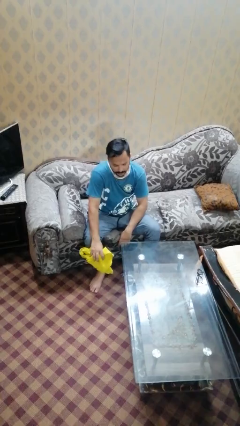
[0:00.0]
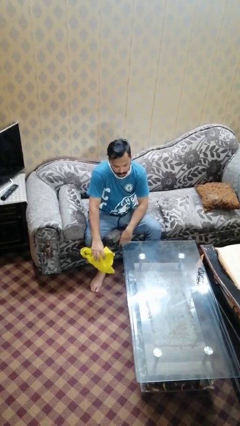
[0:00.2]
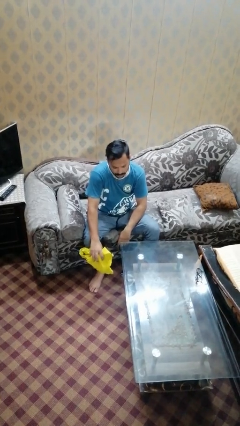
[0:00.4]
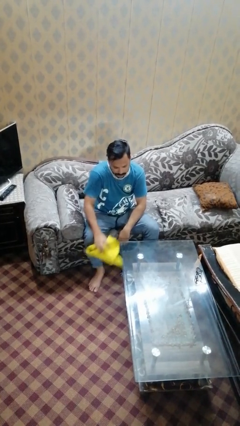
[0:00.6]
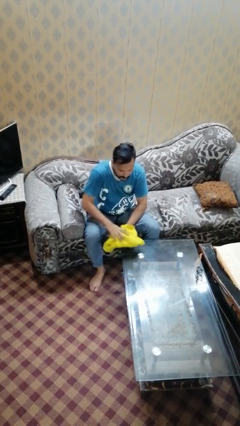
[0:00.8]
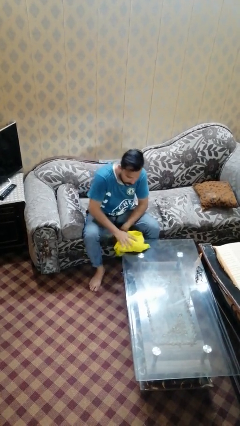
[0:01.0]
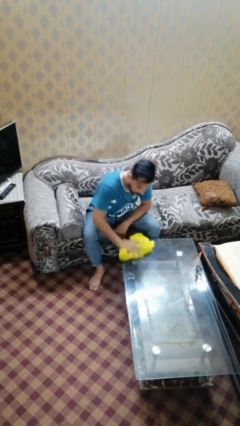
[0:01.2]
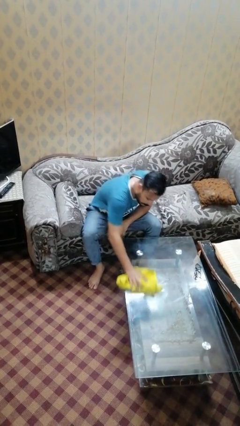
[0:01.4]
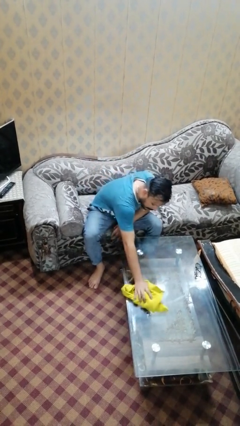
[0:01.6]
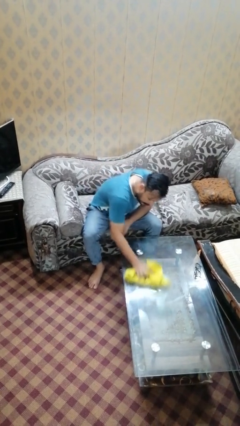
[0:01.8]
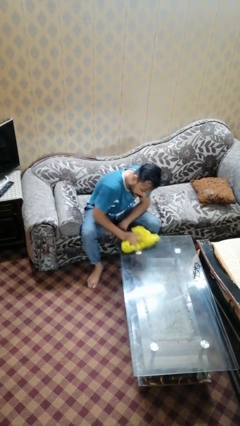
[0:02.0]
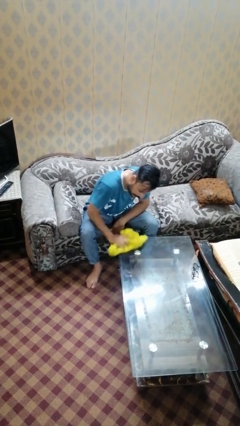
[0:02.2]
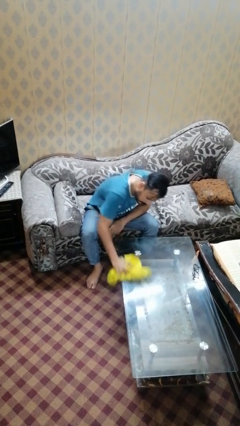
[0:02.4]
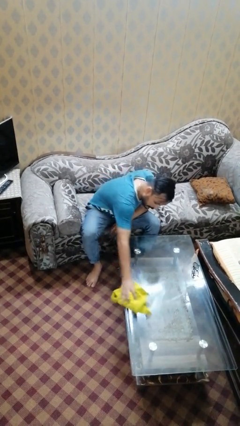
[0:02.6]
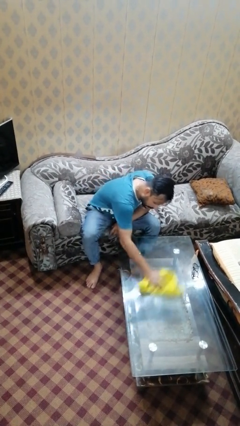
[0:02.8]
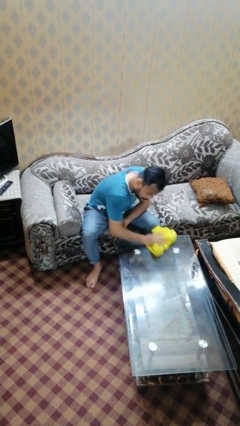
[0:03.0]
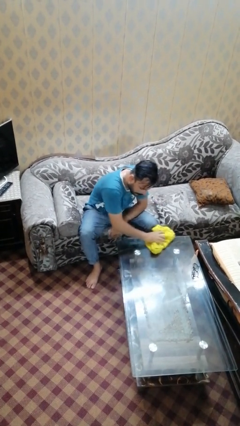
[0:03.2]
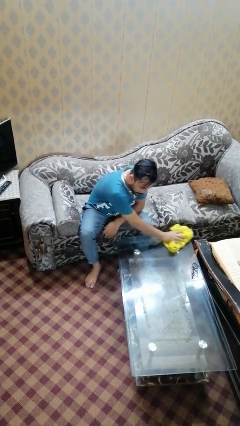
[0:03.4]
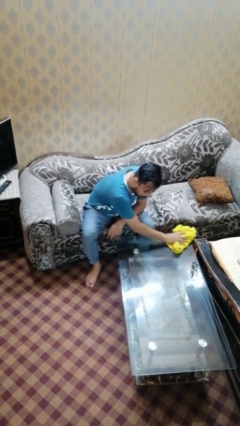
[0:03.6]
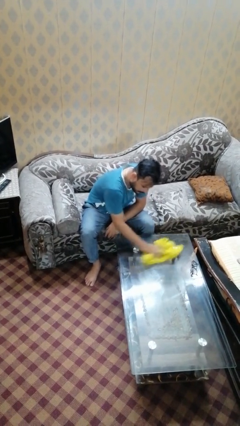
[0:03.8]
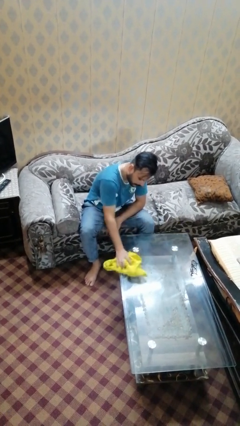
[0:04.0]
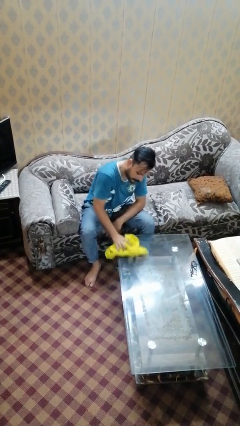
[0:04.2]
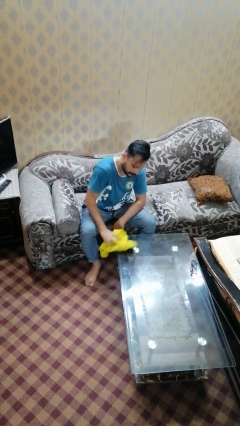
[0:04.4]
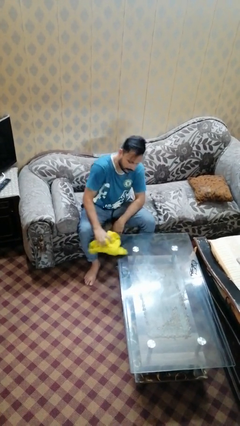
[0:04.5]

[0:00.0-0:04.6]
person cleans table with rag

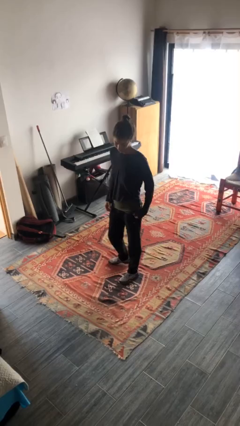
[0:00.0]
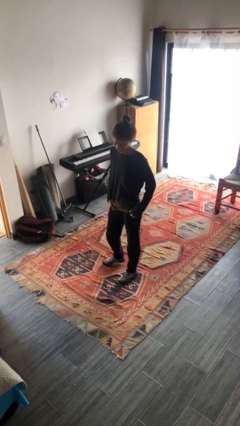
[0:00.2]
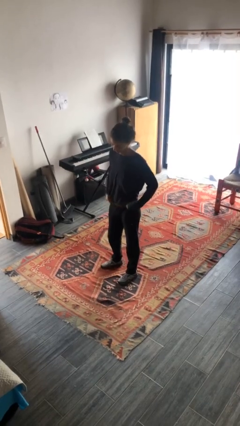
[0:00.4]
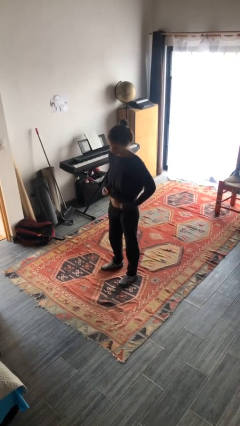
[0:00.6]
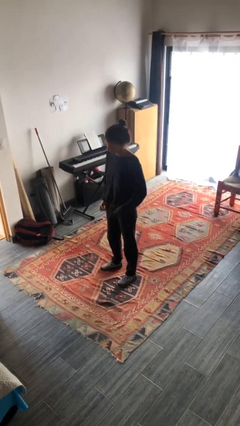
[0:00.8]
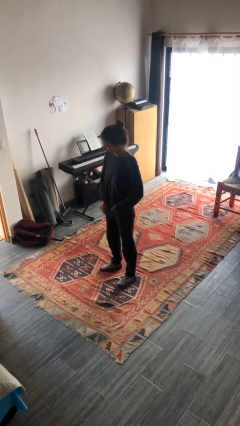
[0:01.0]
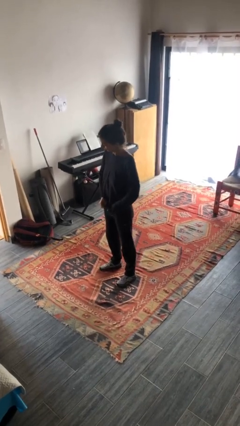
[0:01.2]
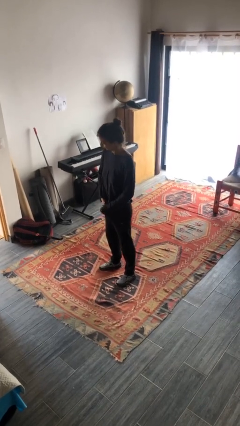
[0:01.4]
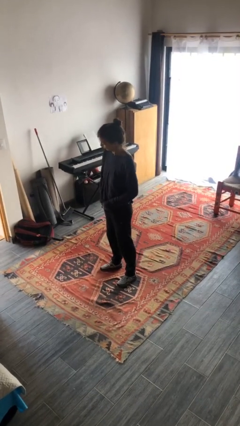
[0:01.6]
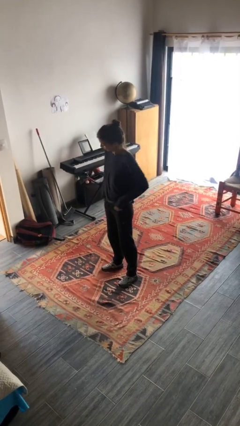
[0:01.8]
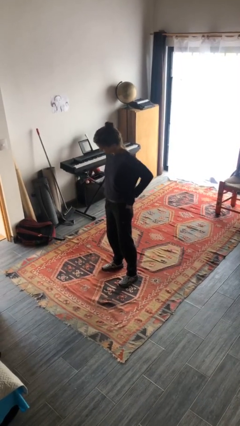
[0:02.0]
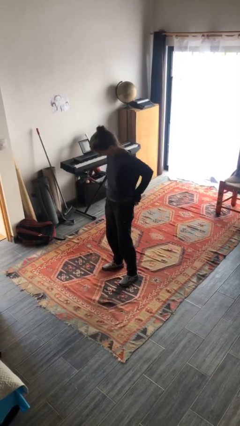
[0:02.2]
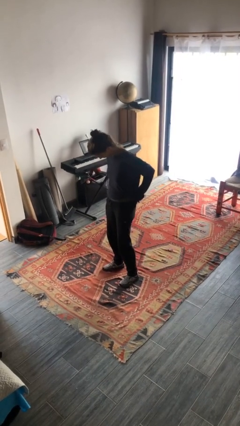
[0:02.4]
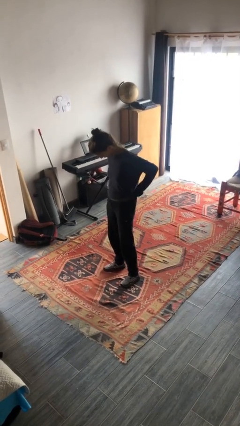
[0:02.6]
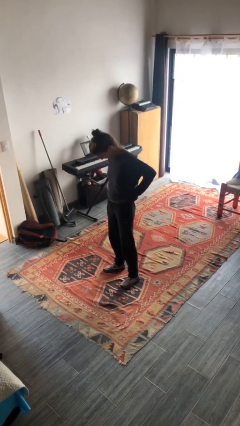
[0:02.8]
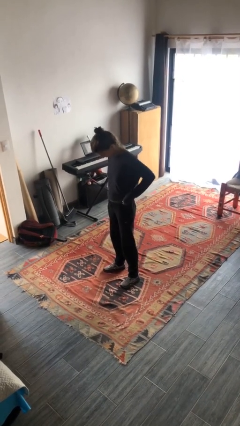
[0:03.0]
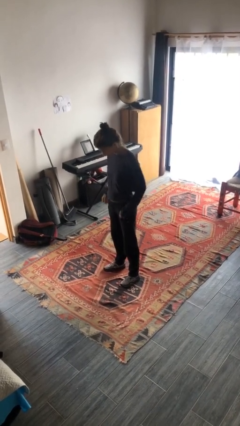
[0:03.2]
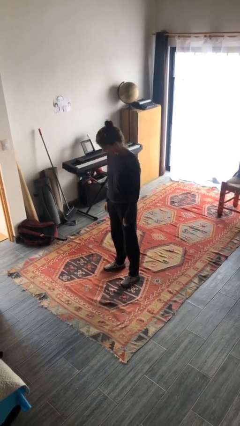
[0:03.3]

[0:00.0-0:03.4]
person tucks in shirt

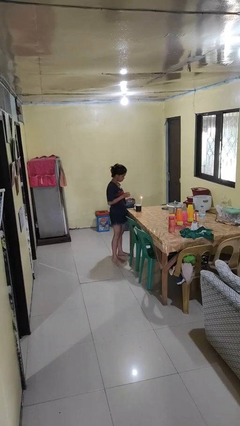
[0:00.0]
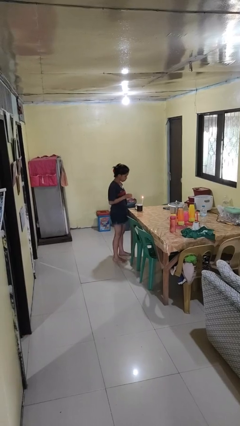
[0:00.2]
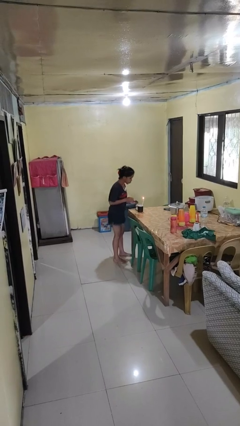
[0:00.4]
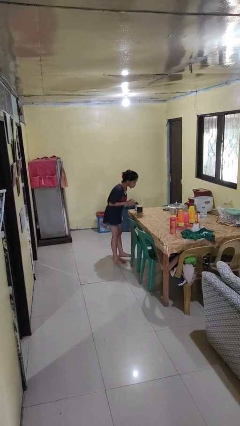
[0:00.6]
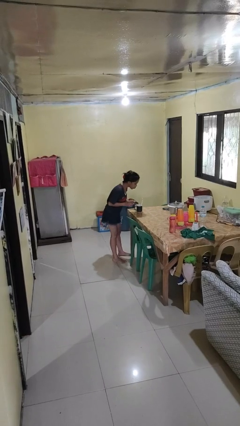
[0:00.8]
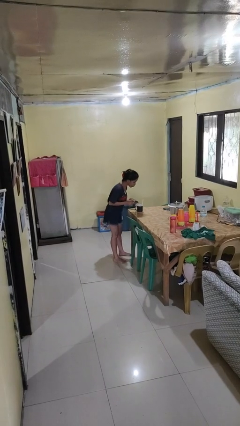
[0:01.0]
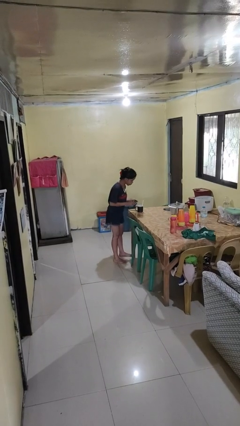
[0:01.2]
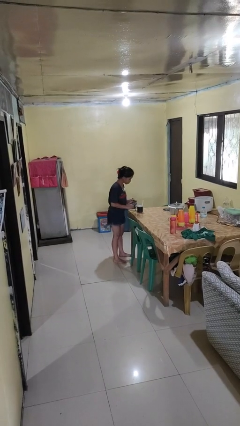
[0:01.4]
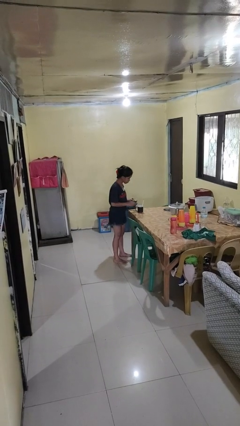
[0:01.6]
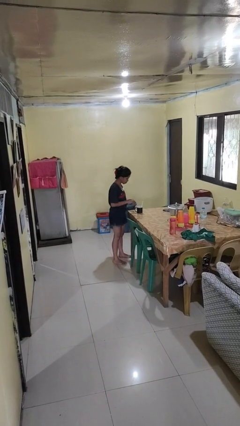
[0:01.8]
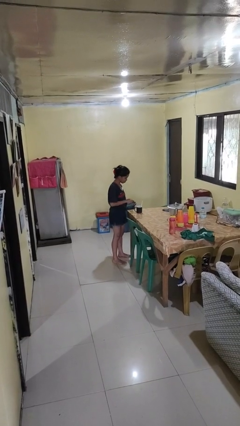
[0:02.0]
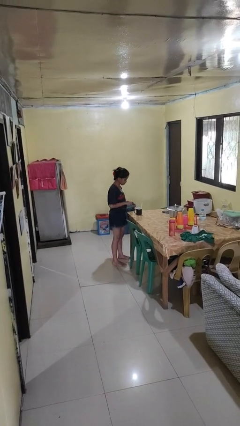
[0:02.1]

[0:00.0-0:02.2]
person extinguishes candle

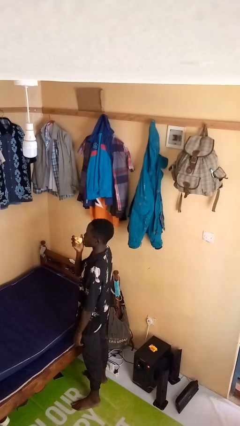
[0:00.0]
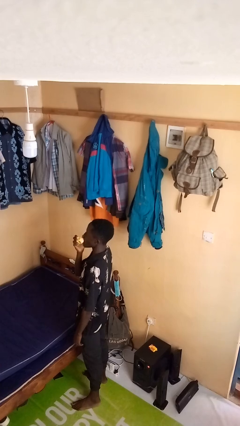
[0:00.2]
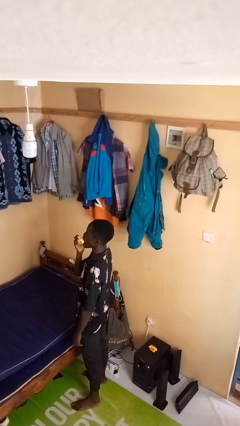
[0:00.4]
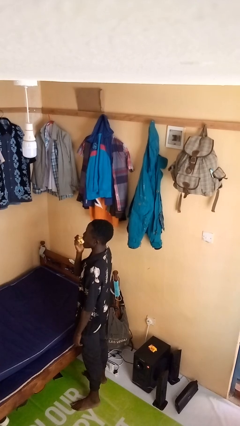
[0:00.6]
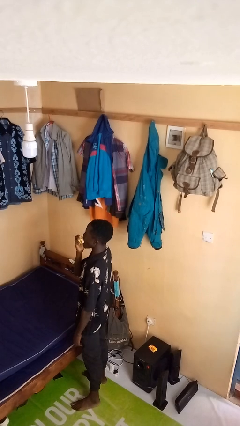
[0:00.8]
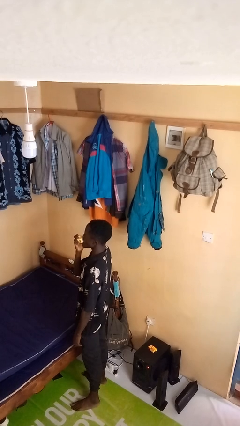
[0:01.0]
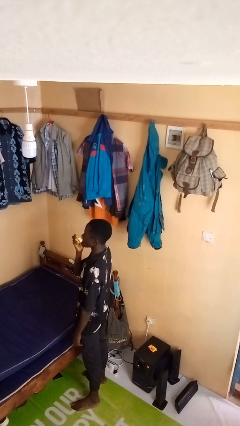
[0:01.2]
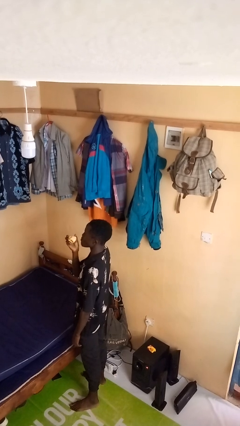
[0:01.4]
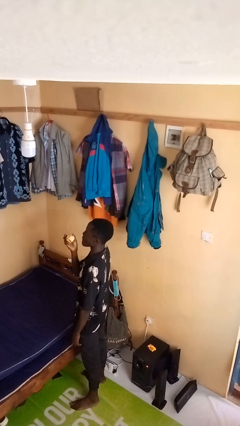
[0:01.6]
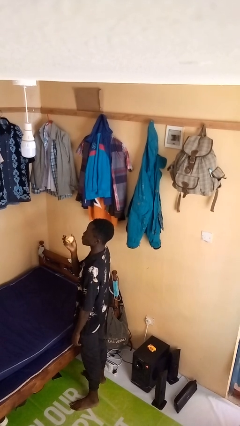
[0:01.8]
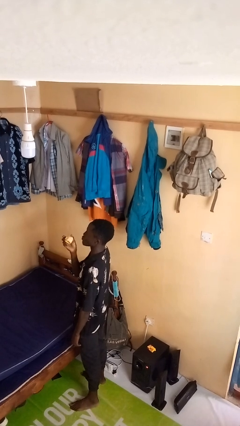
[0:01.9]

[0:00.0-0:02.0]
person eats apple

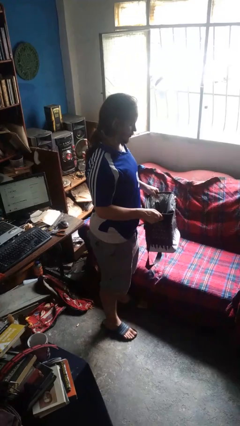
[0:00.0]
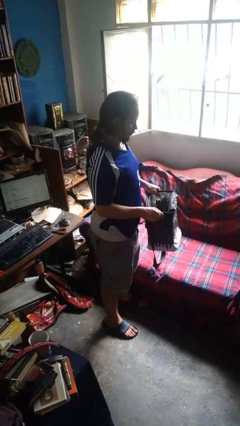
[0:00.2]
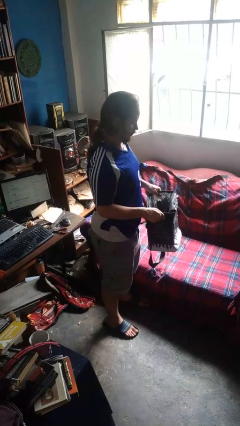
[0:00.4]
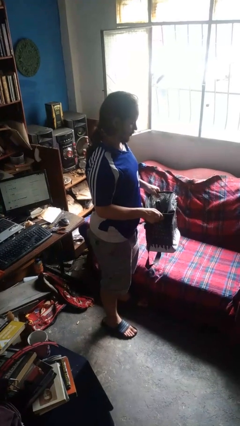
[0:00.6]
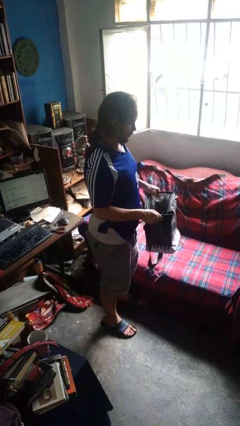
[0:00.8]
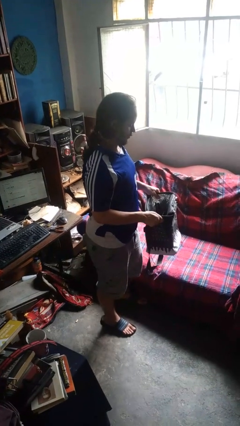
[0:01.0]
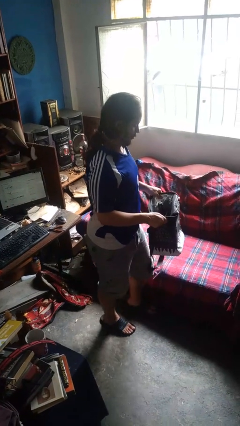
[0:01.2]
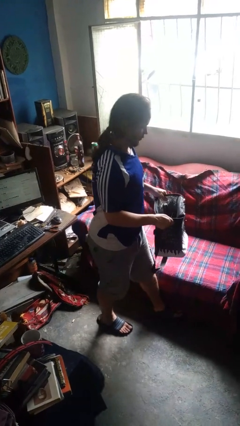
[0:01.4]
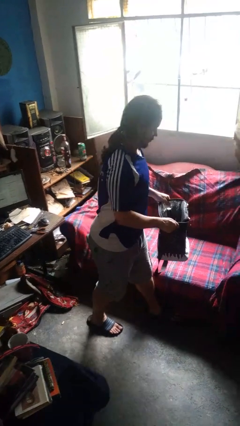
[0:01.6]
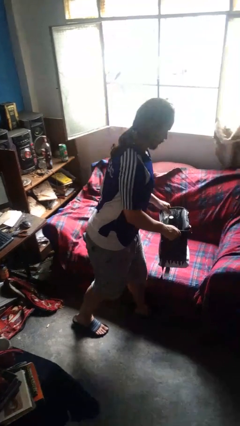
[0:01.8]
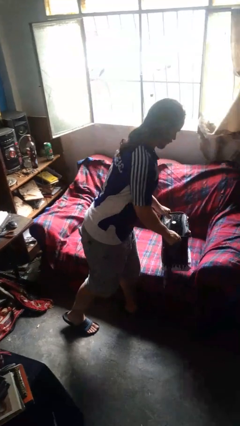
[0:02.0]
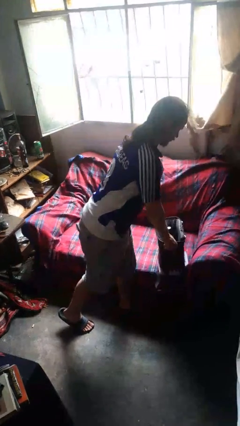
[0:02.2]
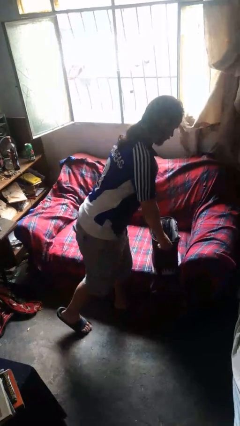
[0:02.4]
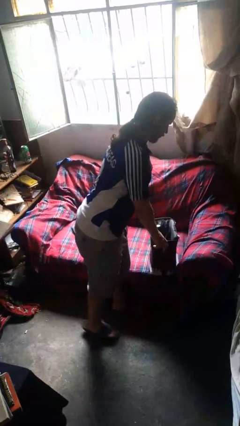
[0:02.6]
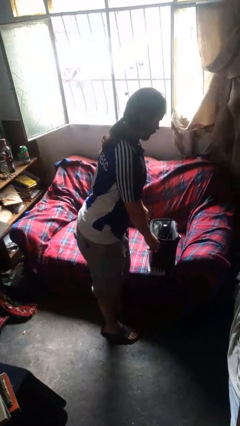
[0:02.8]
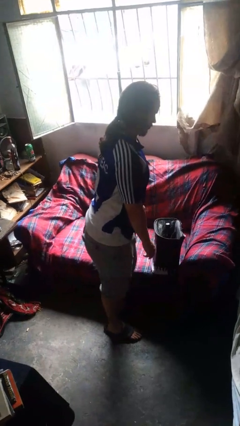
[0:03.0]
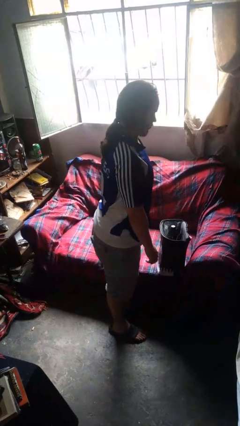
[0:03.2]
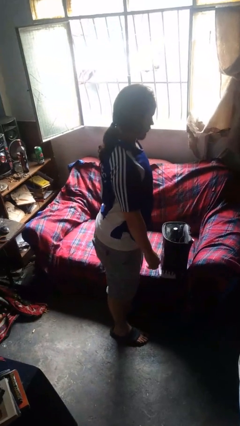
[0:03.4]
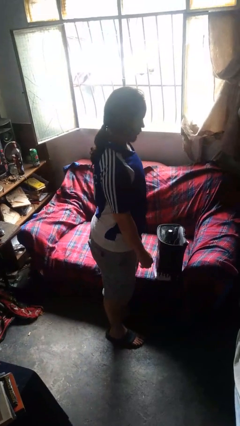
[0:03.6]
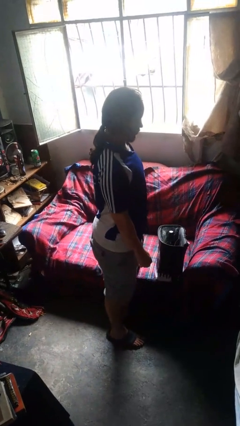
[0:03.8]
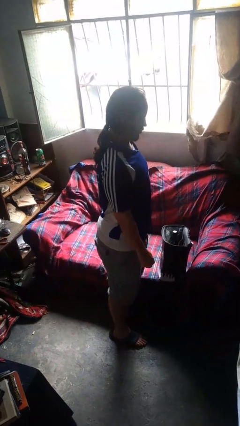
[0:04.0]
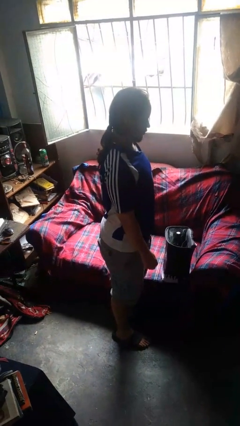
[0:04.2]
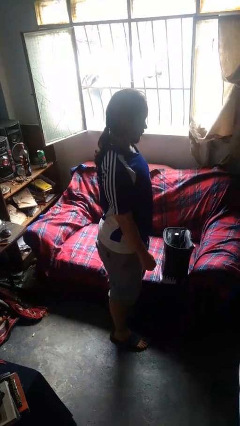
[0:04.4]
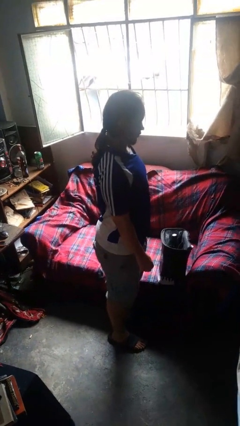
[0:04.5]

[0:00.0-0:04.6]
person puts down object on couch

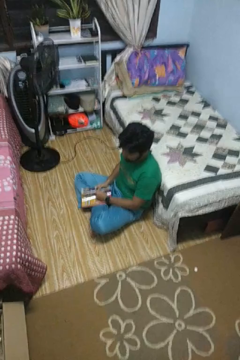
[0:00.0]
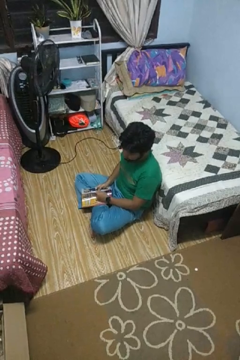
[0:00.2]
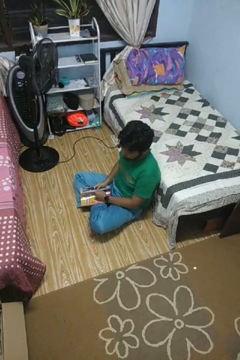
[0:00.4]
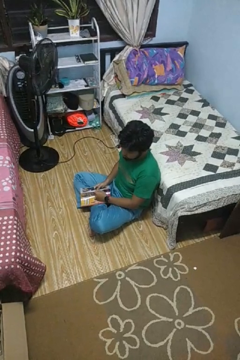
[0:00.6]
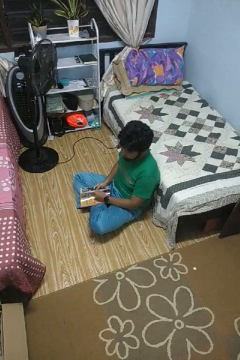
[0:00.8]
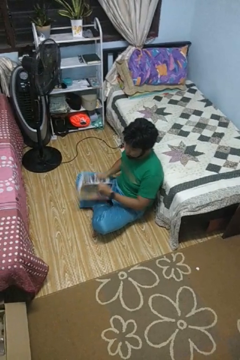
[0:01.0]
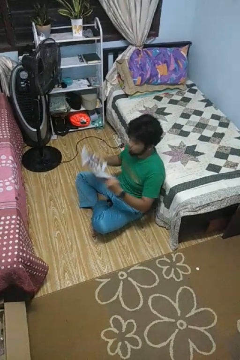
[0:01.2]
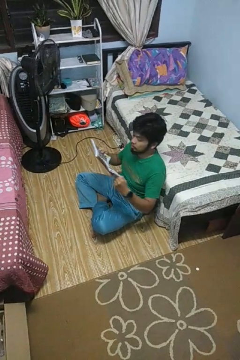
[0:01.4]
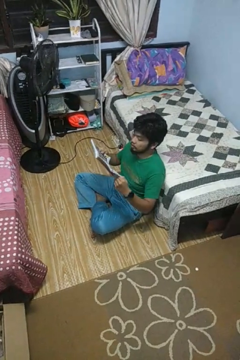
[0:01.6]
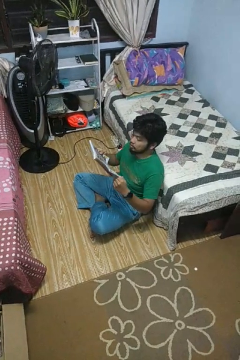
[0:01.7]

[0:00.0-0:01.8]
person reads magazine
